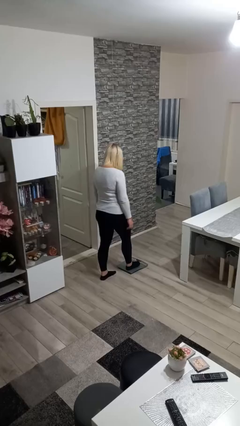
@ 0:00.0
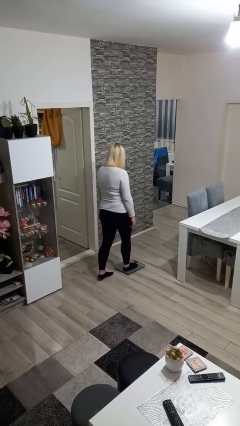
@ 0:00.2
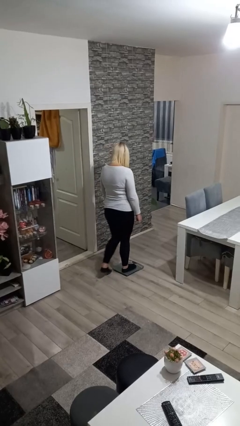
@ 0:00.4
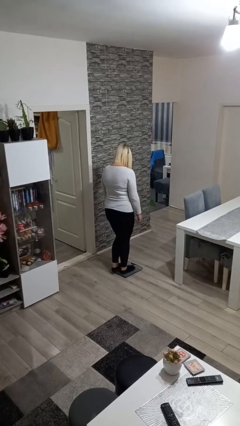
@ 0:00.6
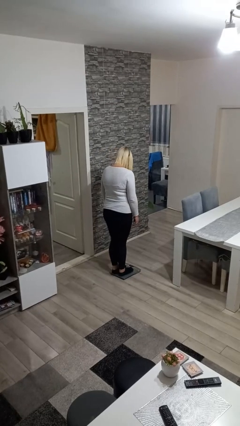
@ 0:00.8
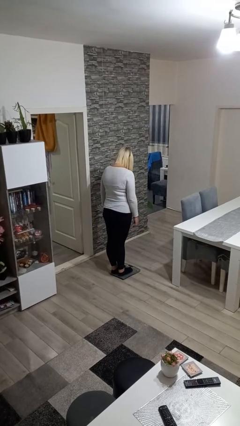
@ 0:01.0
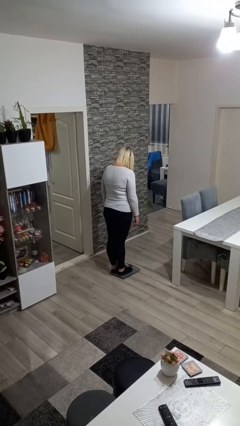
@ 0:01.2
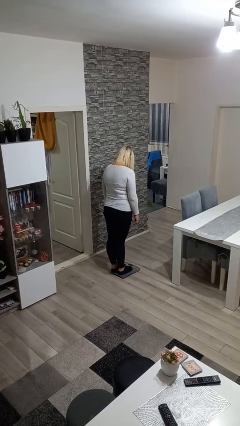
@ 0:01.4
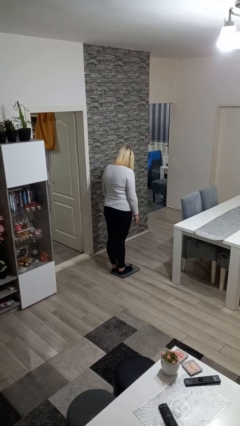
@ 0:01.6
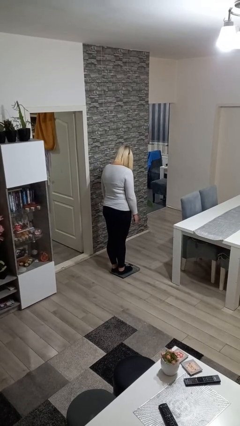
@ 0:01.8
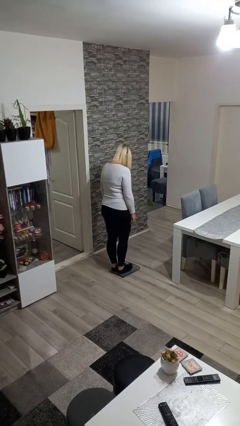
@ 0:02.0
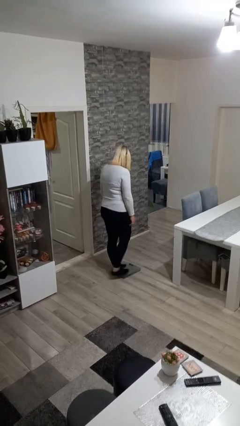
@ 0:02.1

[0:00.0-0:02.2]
person uses bodyweight scale

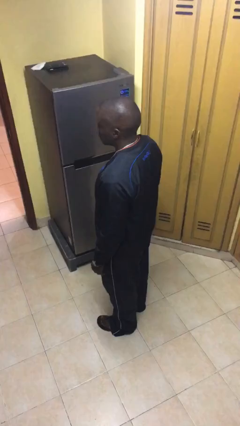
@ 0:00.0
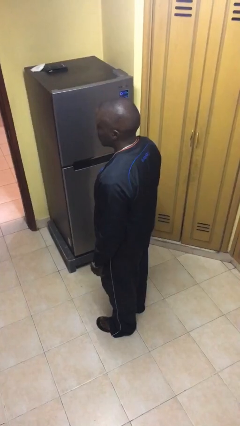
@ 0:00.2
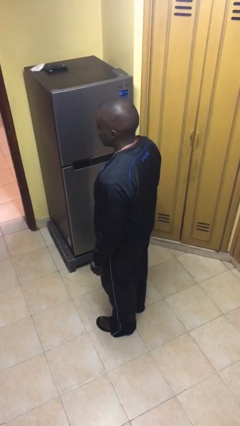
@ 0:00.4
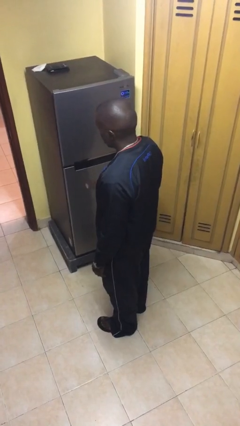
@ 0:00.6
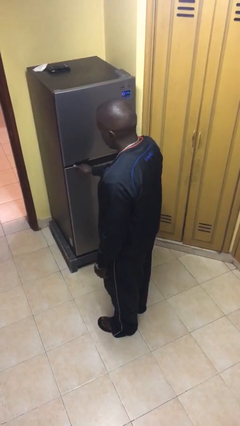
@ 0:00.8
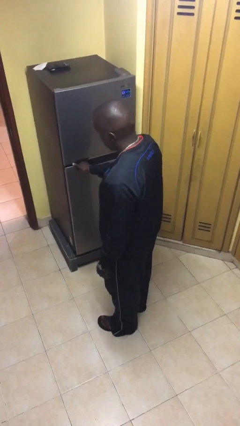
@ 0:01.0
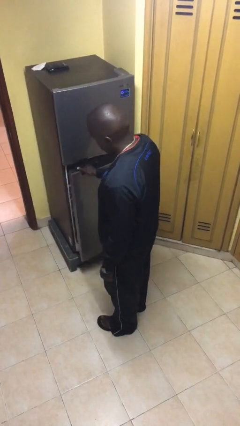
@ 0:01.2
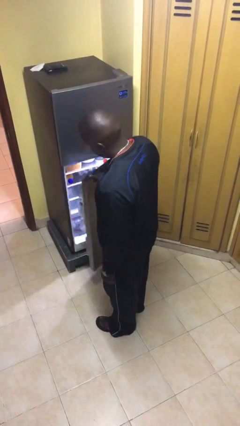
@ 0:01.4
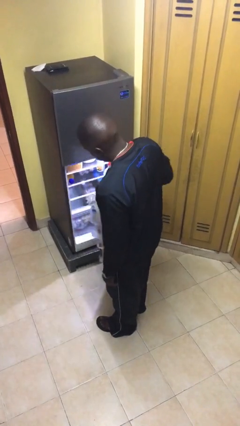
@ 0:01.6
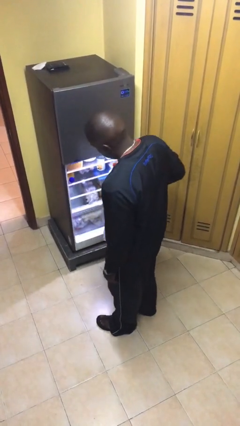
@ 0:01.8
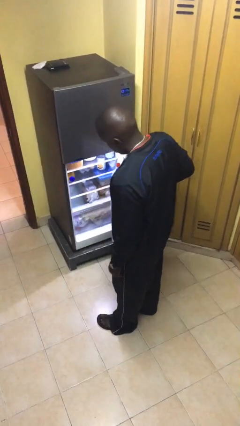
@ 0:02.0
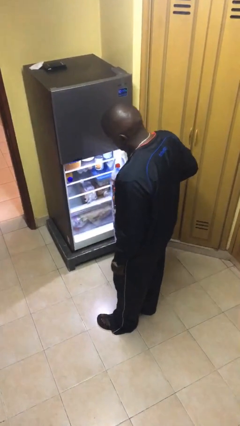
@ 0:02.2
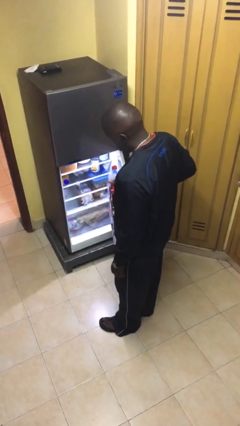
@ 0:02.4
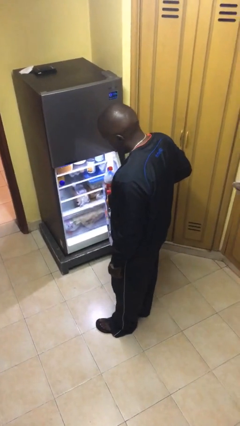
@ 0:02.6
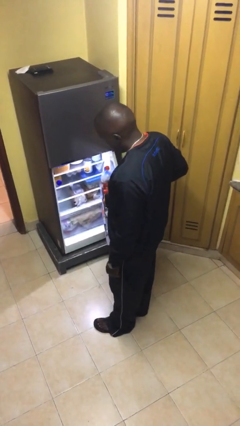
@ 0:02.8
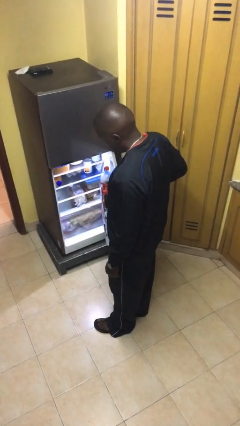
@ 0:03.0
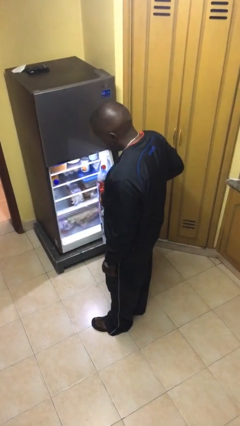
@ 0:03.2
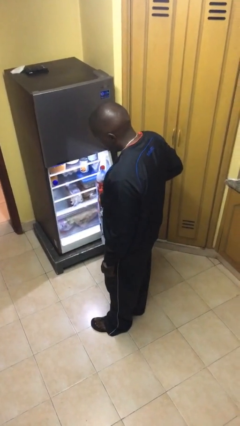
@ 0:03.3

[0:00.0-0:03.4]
person opens refrigerator

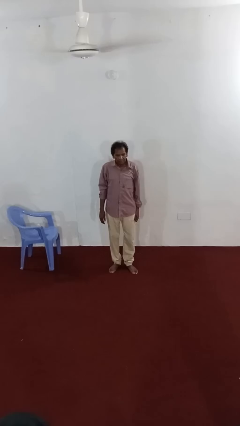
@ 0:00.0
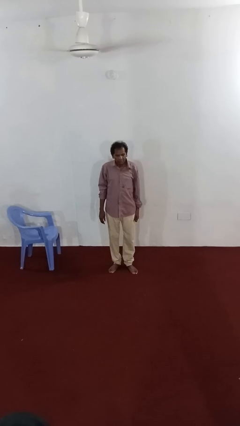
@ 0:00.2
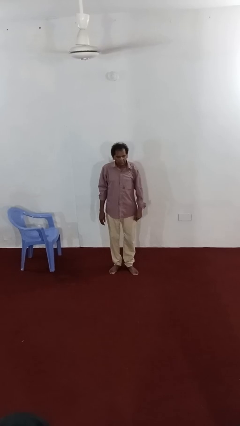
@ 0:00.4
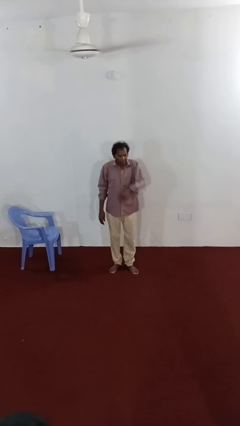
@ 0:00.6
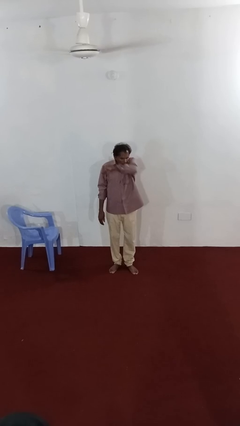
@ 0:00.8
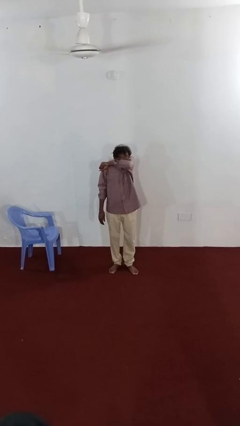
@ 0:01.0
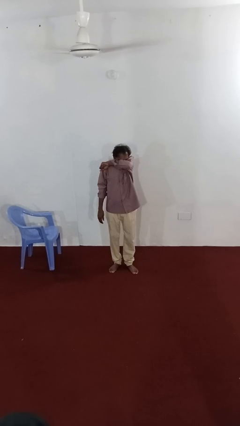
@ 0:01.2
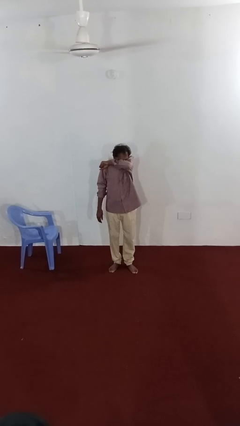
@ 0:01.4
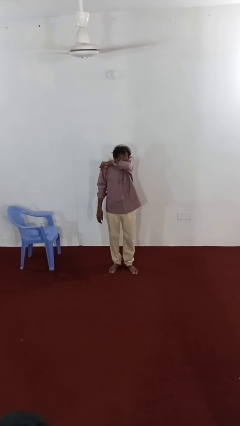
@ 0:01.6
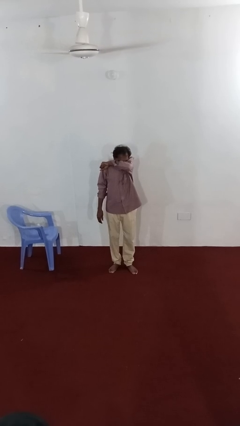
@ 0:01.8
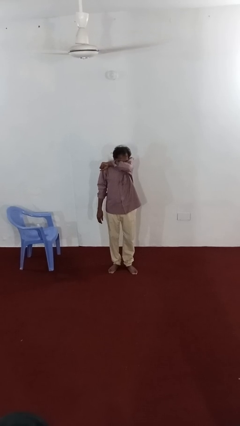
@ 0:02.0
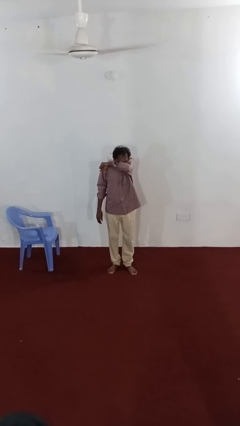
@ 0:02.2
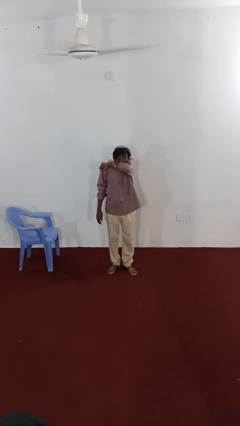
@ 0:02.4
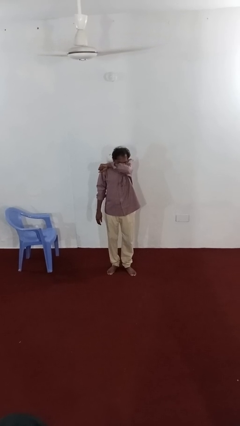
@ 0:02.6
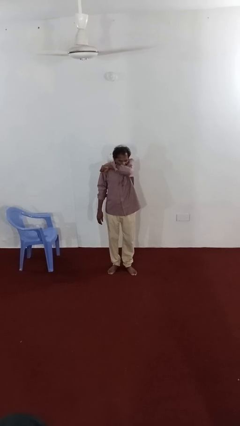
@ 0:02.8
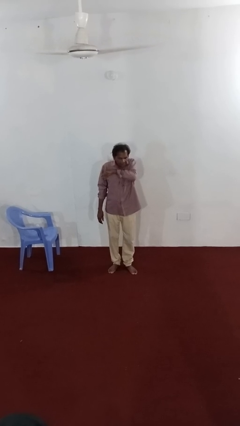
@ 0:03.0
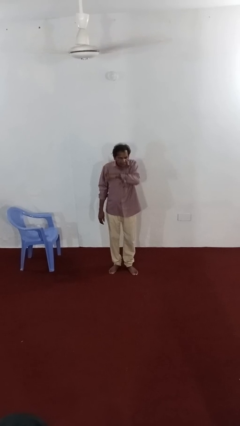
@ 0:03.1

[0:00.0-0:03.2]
person sneezes into arm

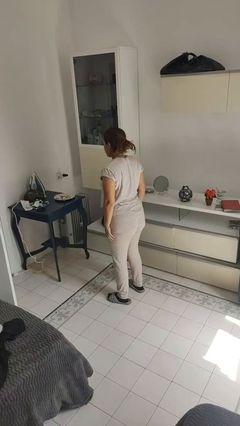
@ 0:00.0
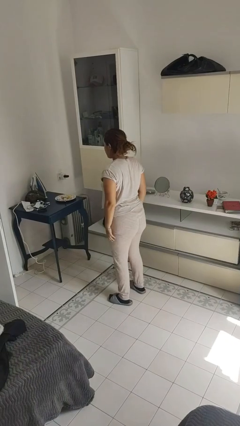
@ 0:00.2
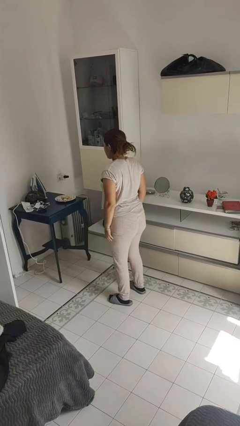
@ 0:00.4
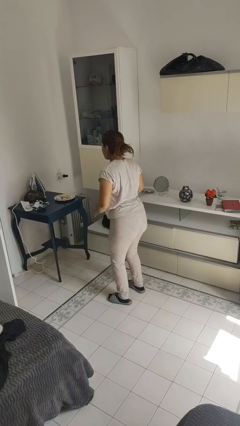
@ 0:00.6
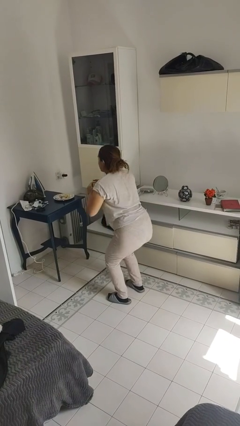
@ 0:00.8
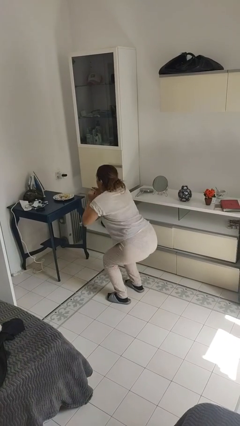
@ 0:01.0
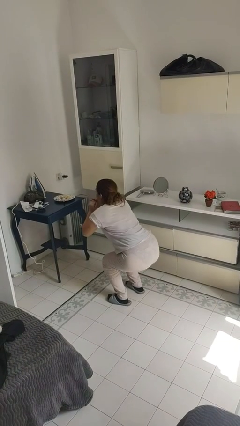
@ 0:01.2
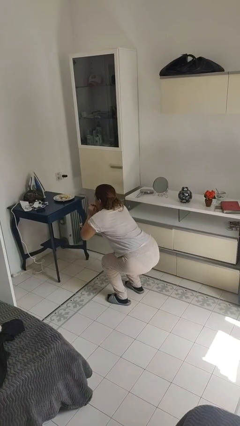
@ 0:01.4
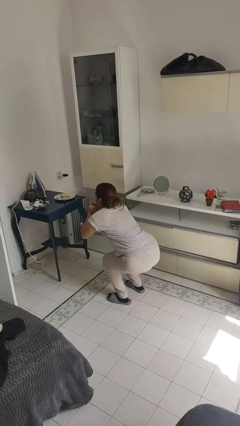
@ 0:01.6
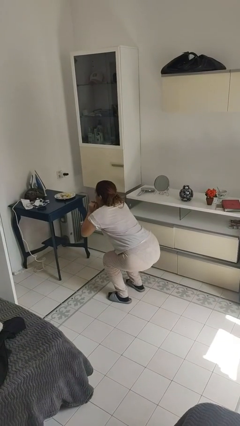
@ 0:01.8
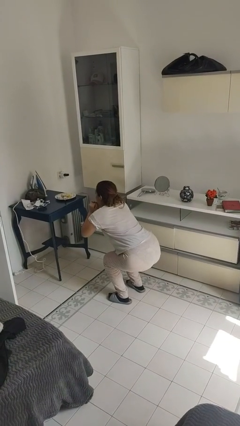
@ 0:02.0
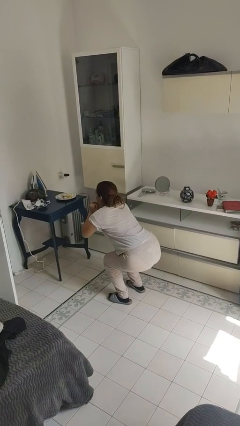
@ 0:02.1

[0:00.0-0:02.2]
person squats

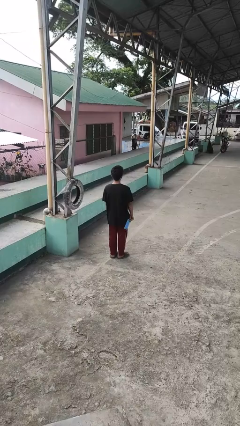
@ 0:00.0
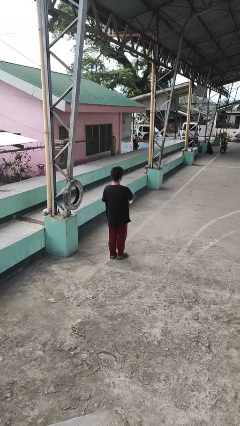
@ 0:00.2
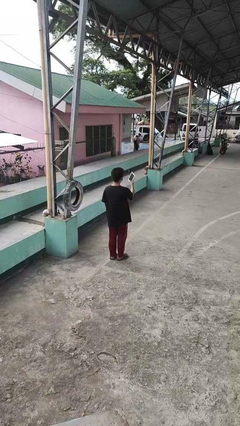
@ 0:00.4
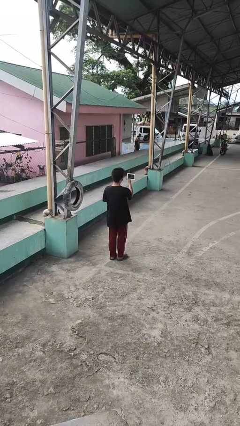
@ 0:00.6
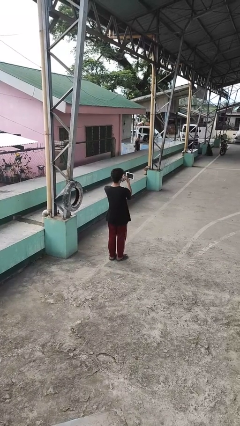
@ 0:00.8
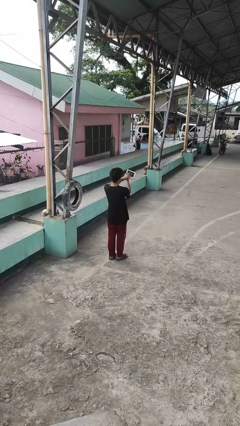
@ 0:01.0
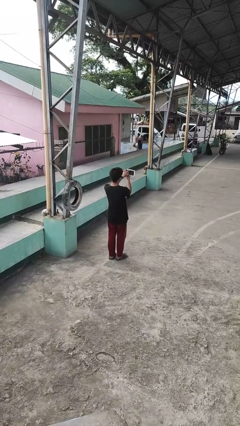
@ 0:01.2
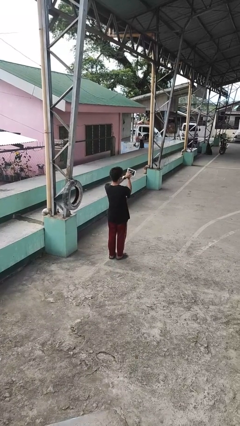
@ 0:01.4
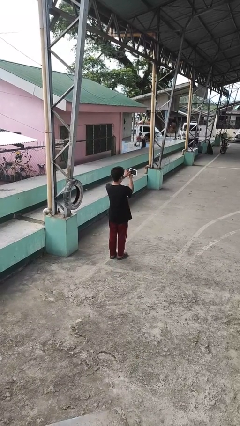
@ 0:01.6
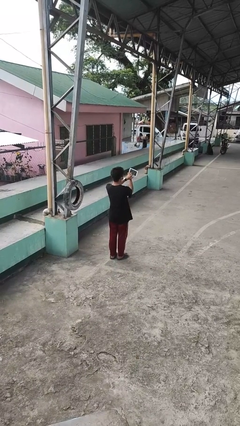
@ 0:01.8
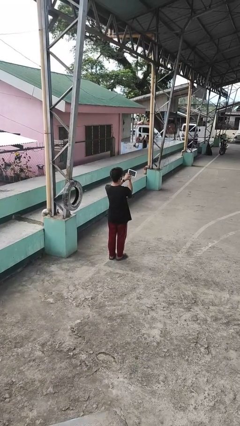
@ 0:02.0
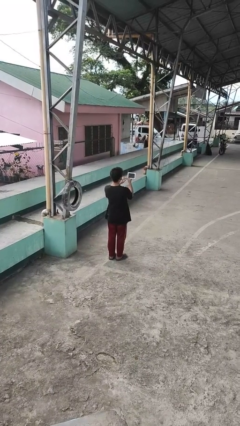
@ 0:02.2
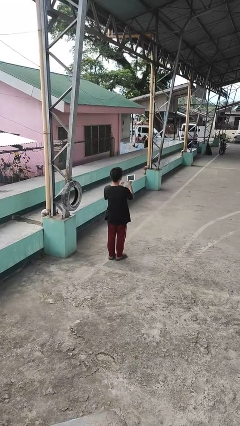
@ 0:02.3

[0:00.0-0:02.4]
person interacts with tablet

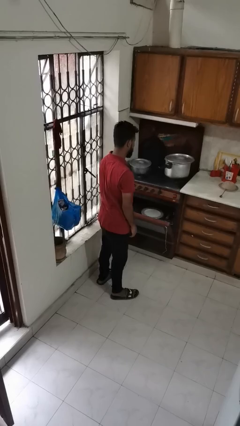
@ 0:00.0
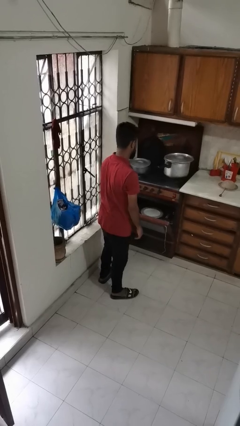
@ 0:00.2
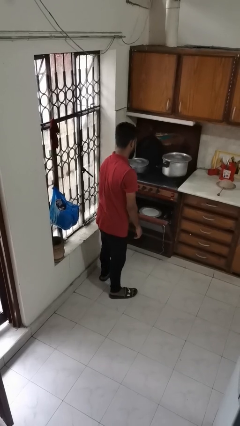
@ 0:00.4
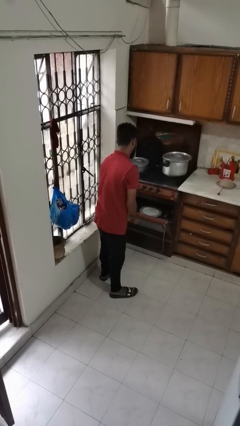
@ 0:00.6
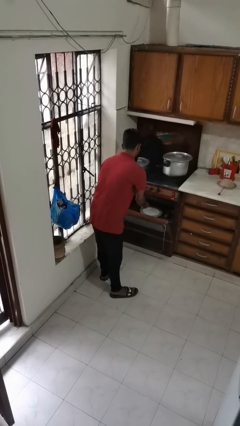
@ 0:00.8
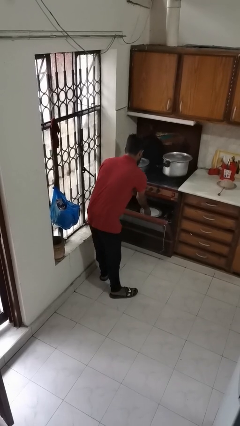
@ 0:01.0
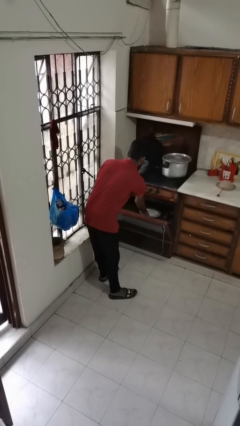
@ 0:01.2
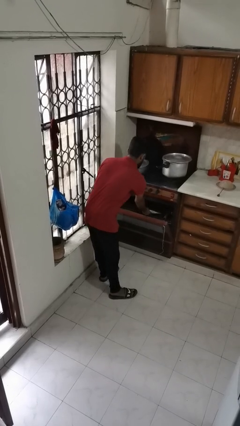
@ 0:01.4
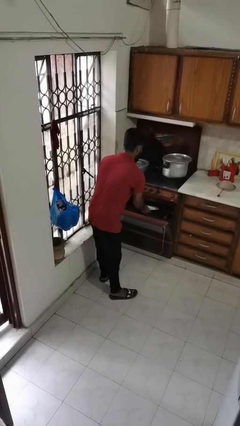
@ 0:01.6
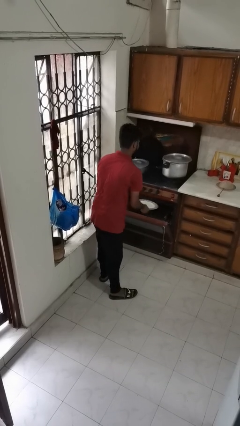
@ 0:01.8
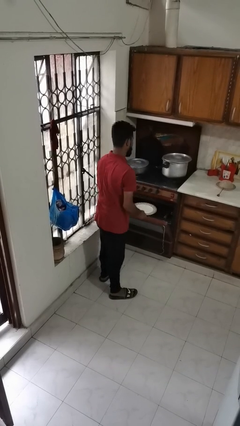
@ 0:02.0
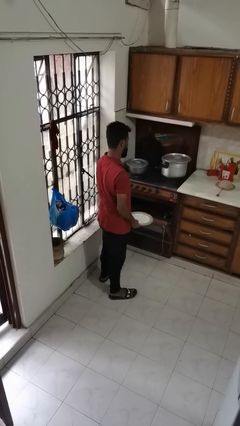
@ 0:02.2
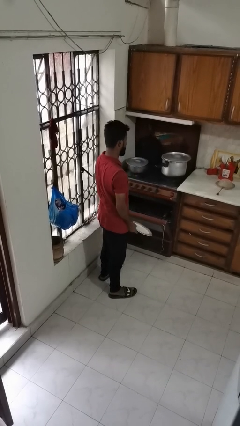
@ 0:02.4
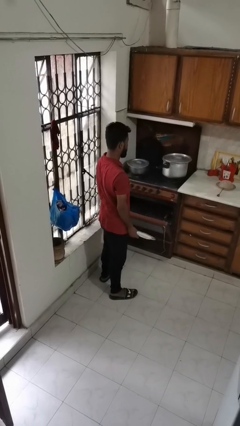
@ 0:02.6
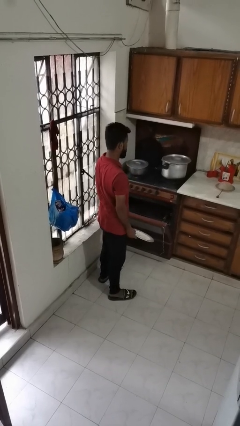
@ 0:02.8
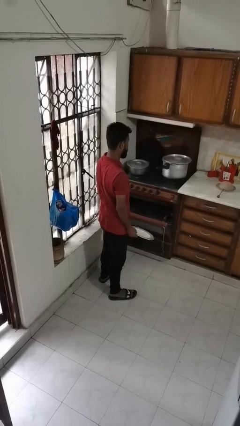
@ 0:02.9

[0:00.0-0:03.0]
person takes object from oven

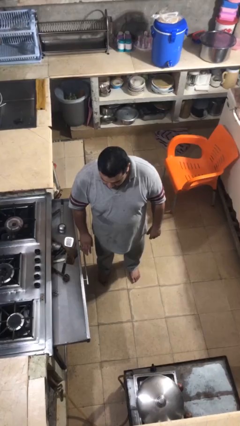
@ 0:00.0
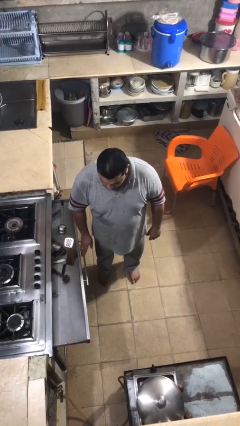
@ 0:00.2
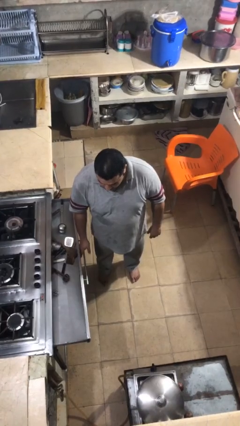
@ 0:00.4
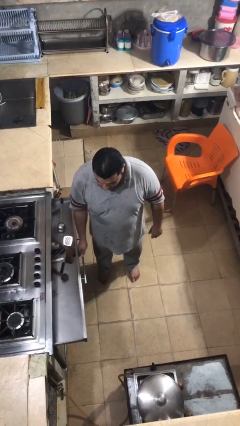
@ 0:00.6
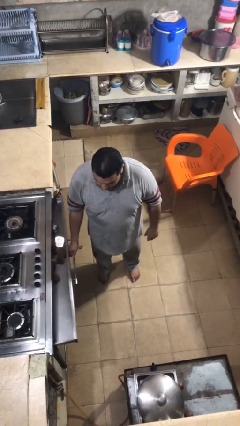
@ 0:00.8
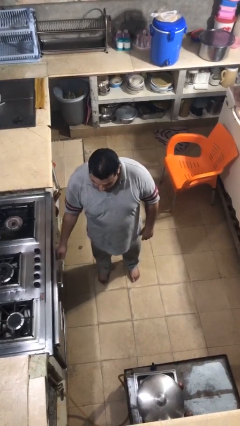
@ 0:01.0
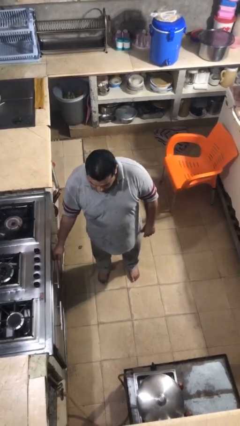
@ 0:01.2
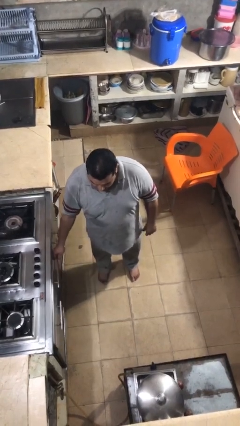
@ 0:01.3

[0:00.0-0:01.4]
person closes kitchen drawer
